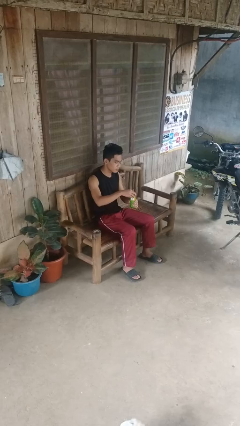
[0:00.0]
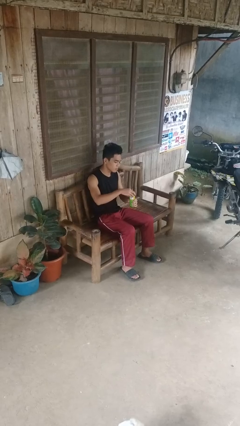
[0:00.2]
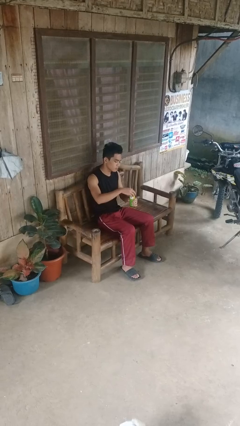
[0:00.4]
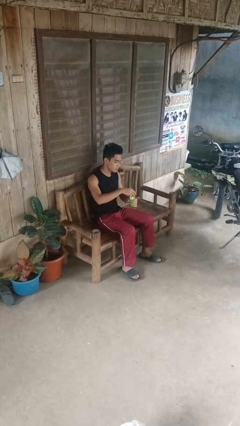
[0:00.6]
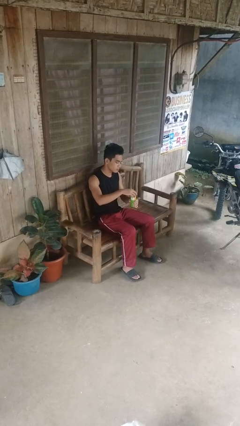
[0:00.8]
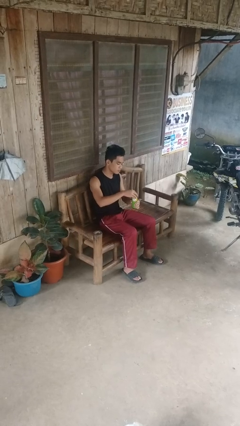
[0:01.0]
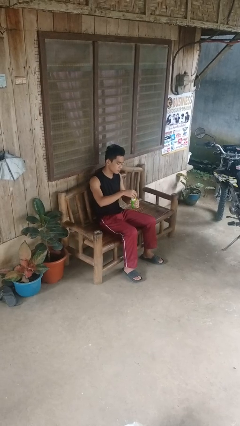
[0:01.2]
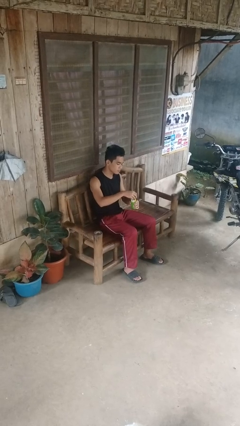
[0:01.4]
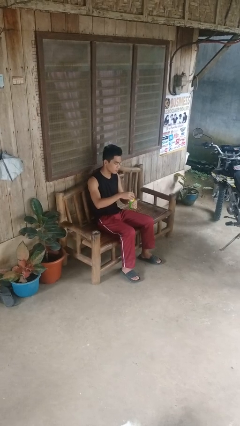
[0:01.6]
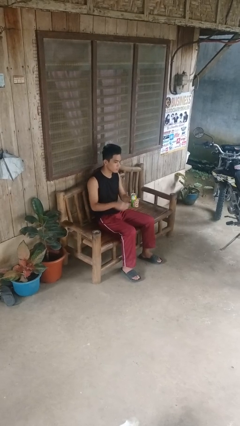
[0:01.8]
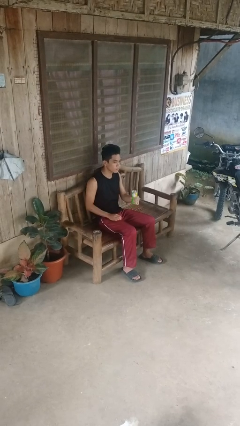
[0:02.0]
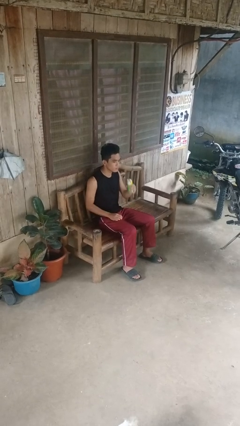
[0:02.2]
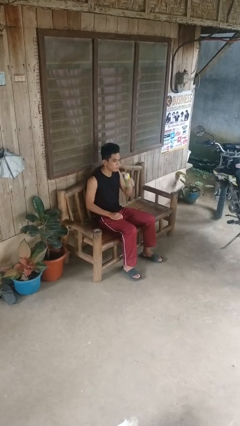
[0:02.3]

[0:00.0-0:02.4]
person opens beverage can

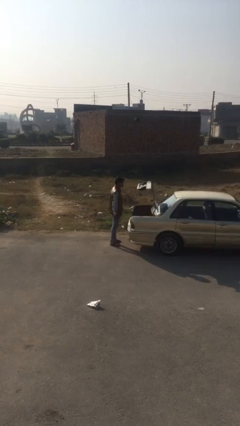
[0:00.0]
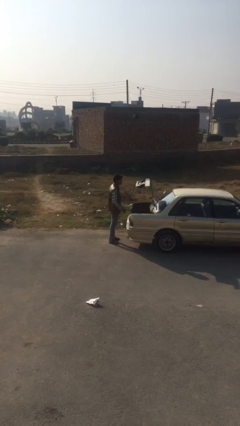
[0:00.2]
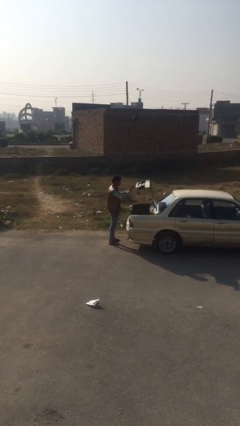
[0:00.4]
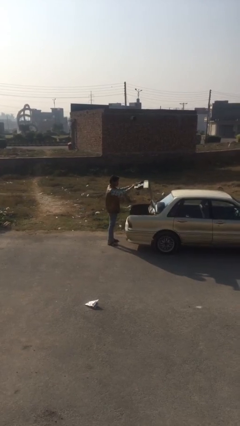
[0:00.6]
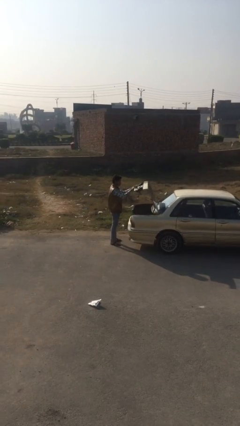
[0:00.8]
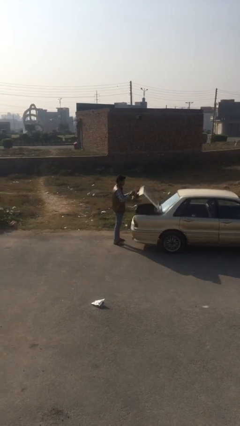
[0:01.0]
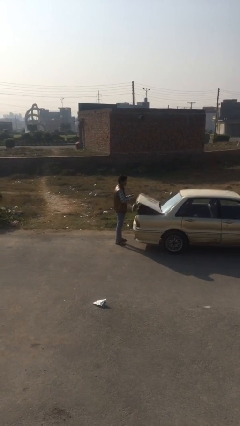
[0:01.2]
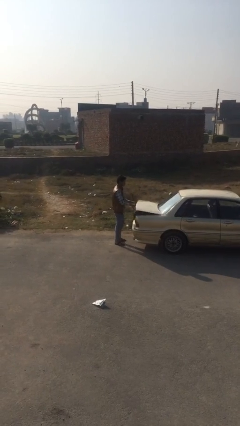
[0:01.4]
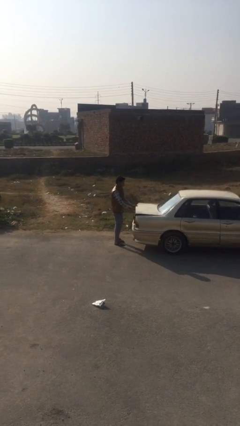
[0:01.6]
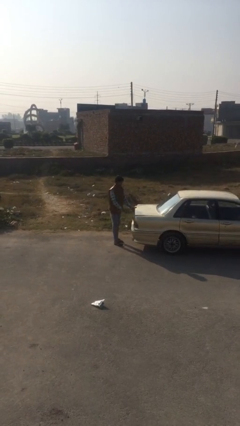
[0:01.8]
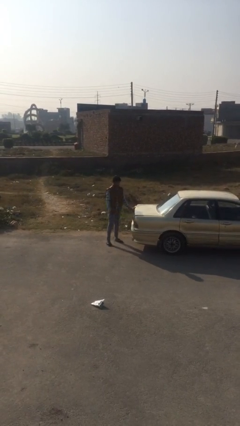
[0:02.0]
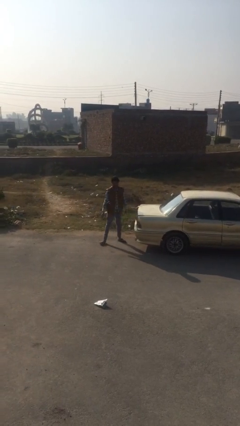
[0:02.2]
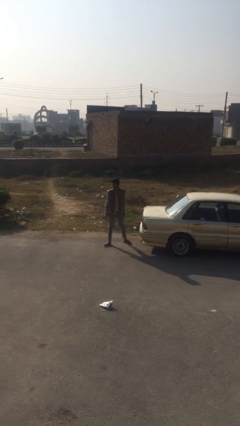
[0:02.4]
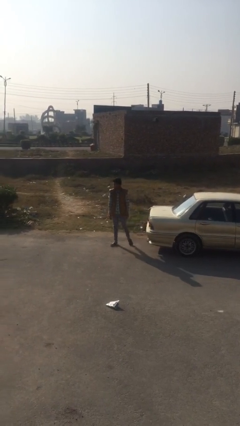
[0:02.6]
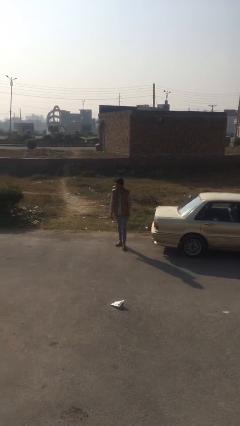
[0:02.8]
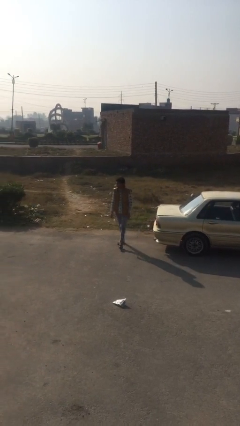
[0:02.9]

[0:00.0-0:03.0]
person closes car trunk

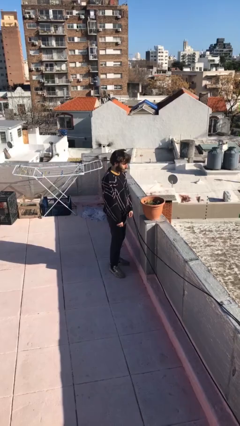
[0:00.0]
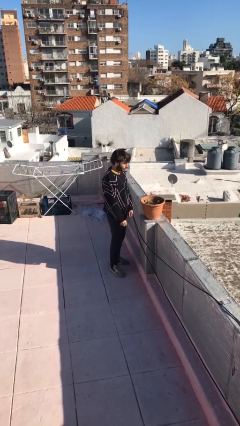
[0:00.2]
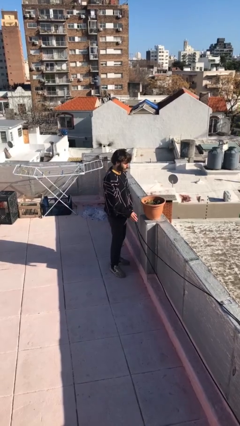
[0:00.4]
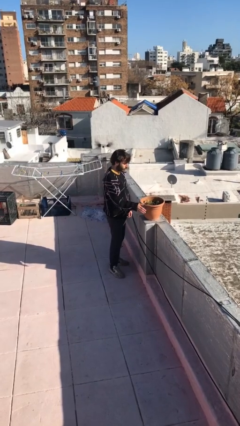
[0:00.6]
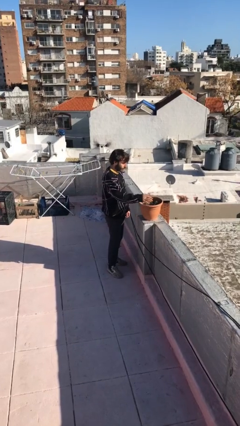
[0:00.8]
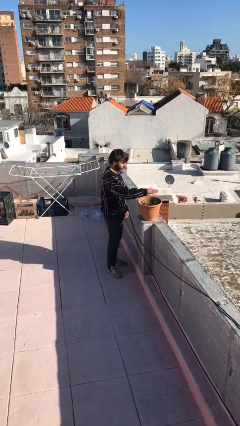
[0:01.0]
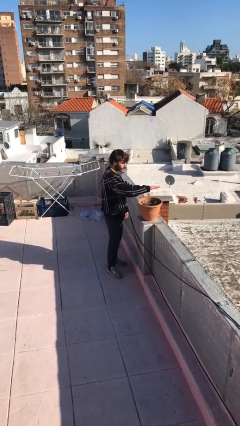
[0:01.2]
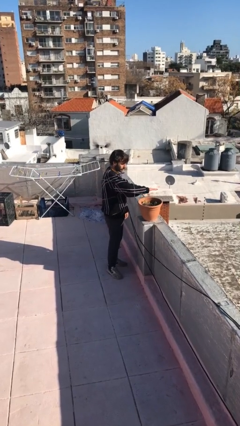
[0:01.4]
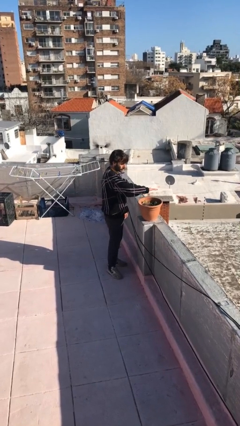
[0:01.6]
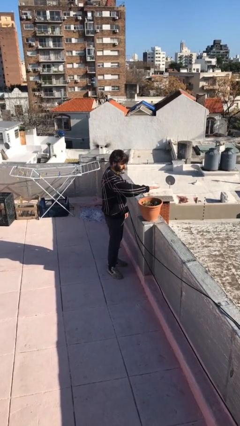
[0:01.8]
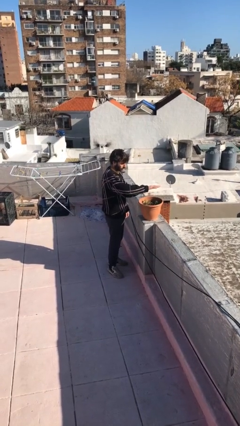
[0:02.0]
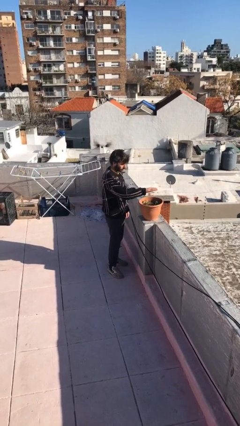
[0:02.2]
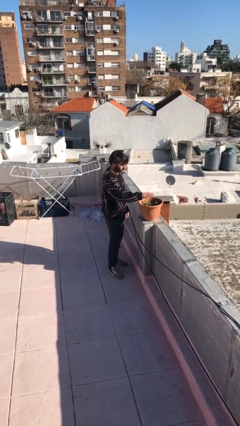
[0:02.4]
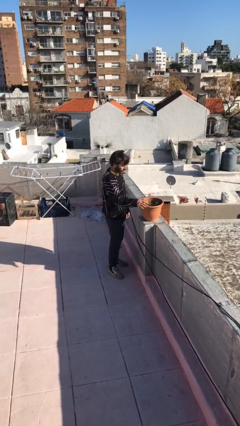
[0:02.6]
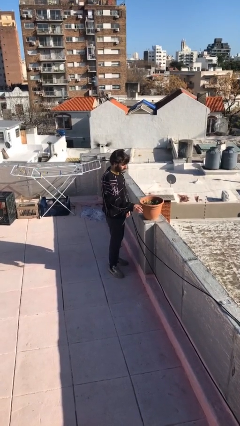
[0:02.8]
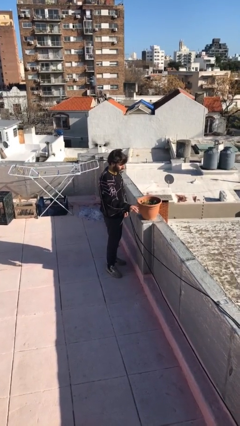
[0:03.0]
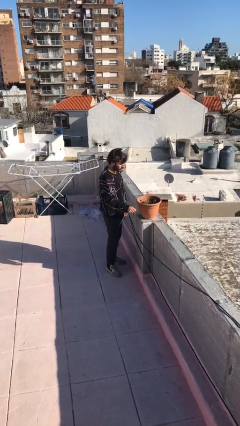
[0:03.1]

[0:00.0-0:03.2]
person waves hand over object

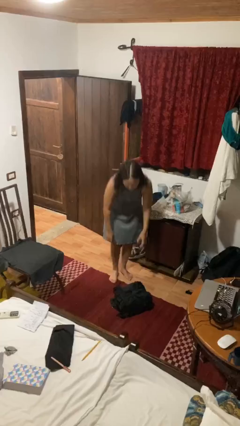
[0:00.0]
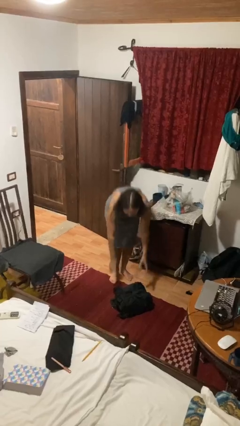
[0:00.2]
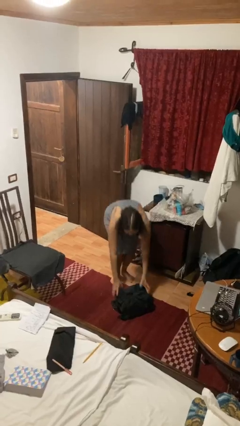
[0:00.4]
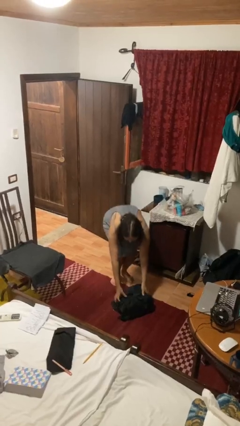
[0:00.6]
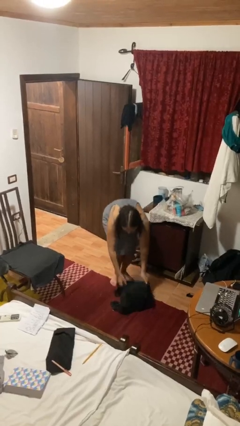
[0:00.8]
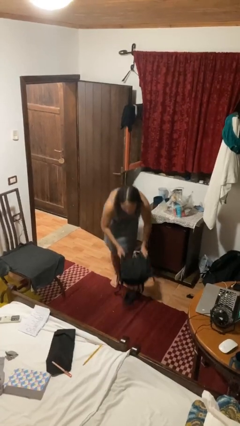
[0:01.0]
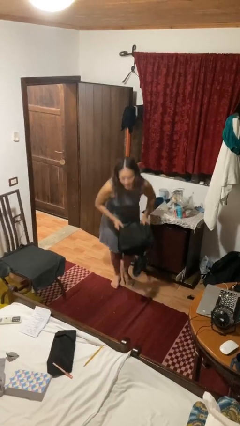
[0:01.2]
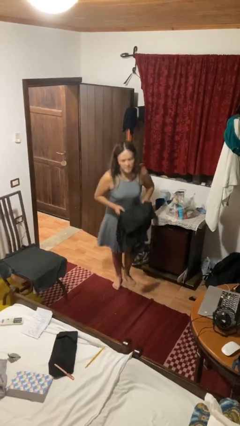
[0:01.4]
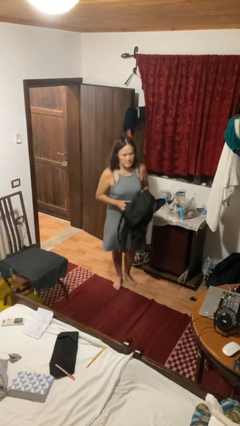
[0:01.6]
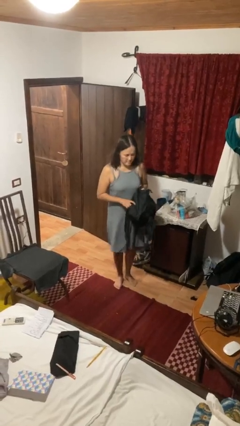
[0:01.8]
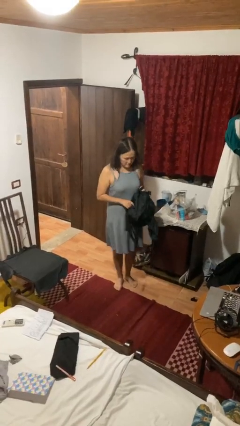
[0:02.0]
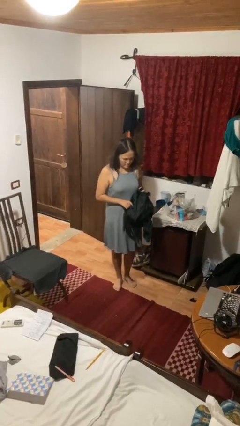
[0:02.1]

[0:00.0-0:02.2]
person picks up object from floor

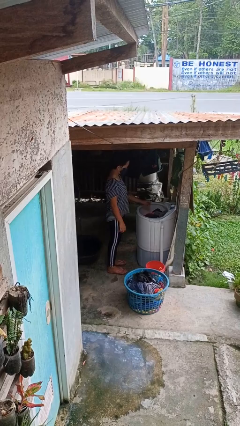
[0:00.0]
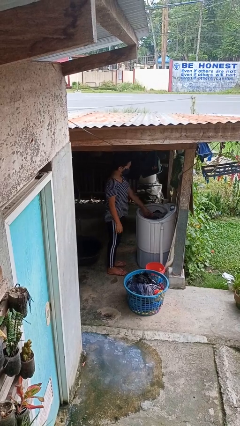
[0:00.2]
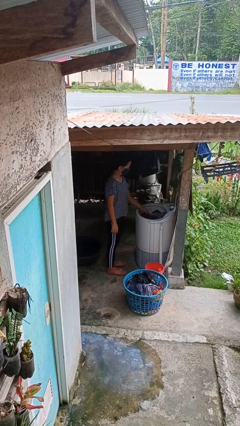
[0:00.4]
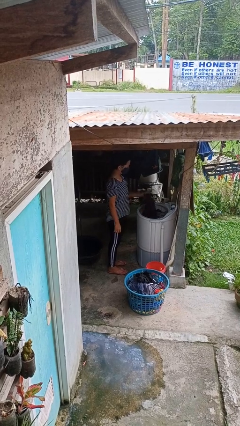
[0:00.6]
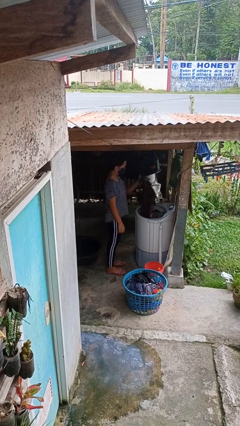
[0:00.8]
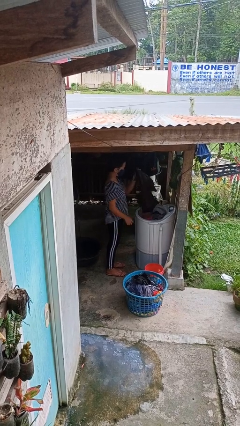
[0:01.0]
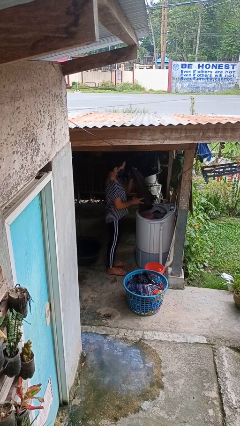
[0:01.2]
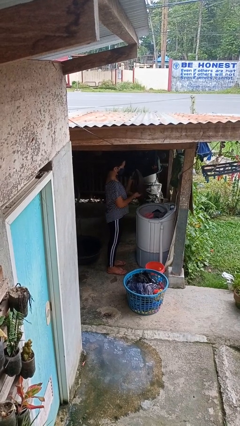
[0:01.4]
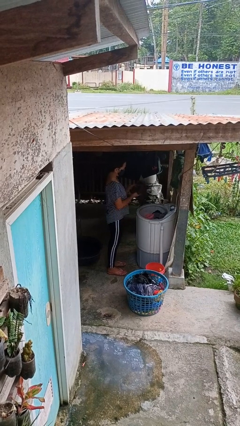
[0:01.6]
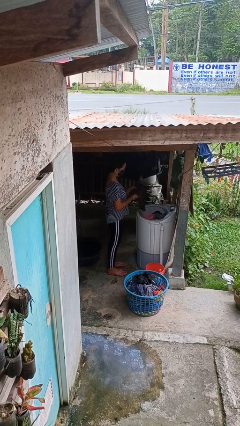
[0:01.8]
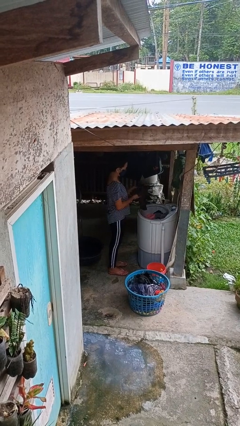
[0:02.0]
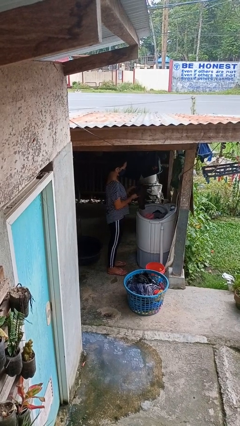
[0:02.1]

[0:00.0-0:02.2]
person unloads clotheswasher

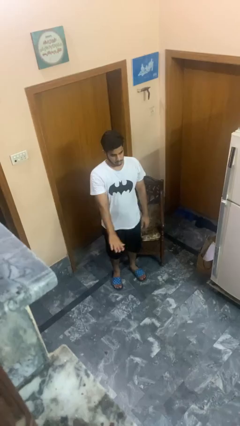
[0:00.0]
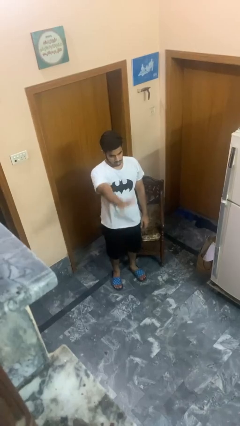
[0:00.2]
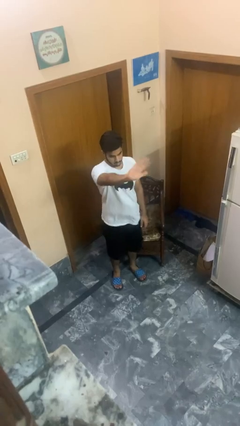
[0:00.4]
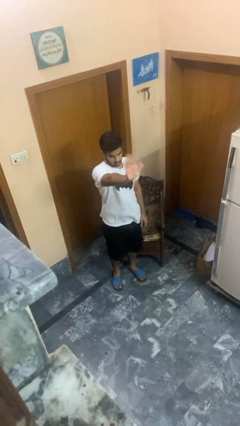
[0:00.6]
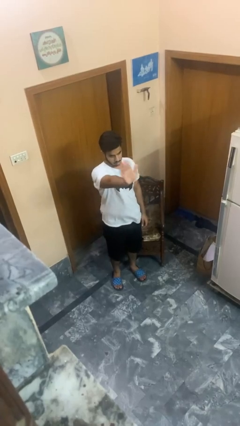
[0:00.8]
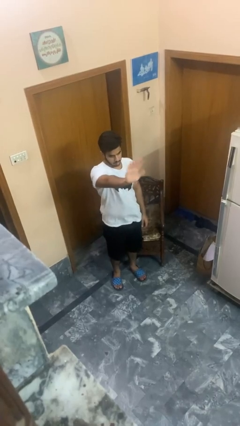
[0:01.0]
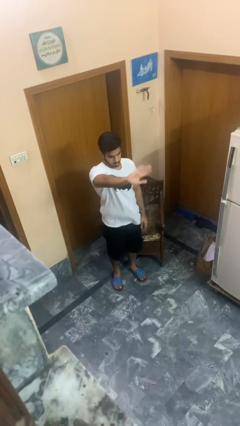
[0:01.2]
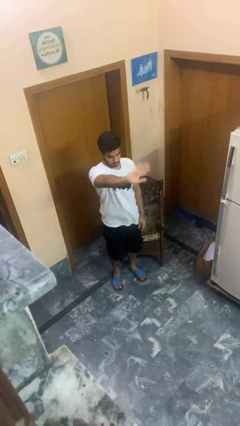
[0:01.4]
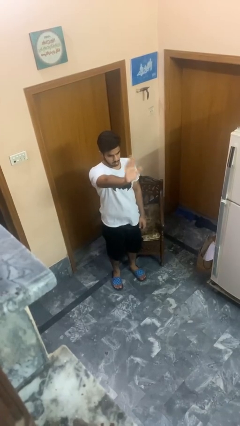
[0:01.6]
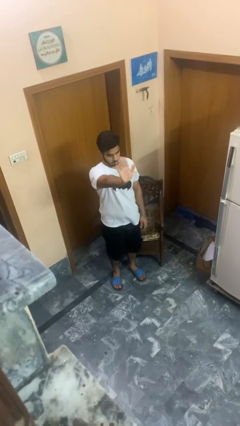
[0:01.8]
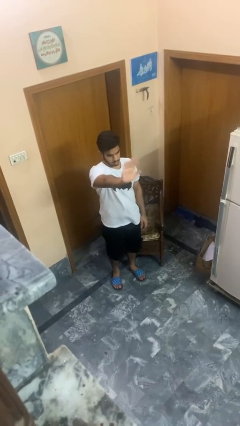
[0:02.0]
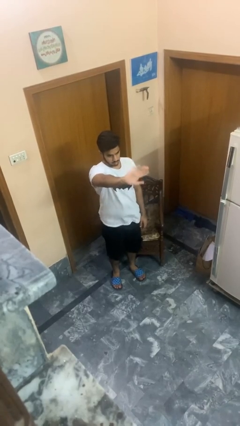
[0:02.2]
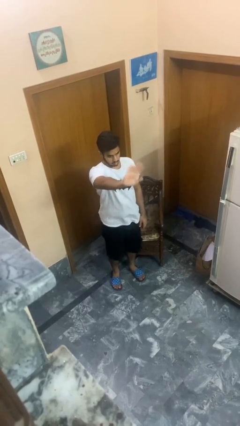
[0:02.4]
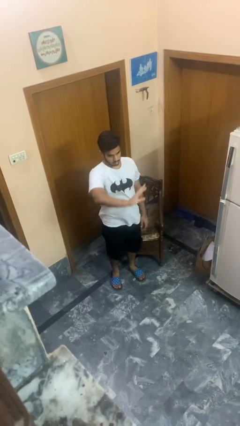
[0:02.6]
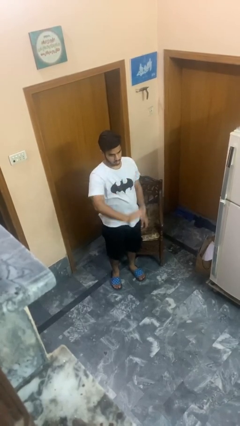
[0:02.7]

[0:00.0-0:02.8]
person waves at person

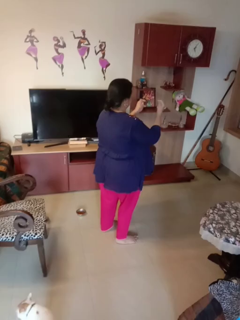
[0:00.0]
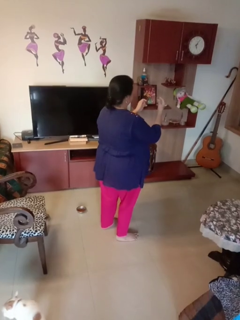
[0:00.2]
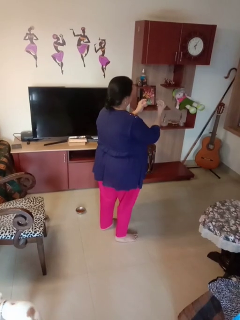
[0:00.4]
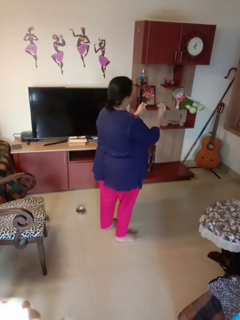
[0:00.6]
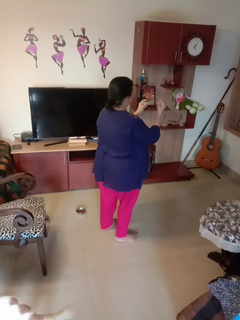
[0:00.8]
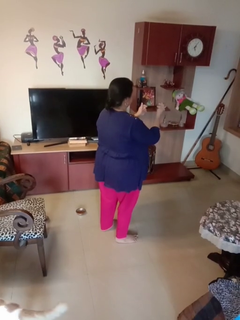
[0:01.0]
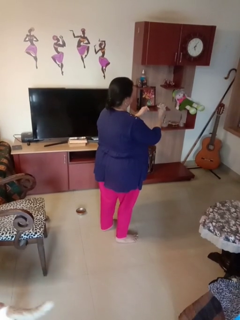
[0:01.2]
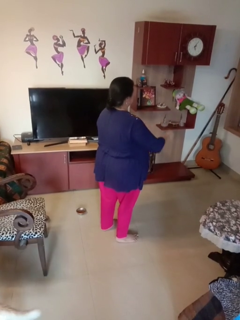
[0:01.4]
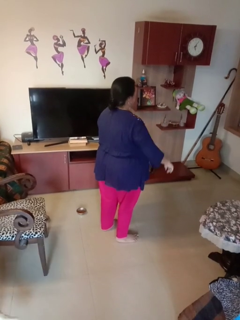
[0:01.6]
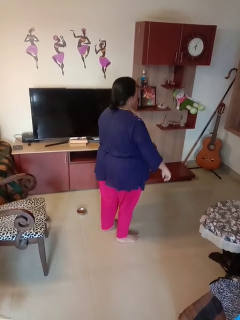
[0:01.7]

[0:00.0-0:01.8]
person snaps fingers
